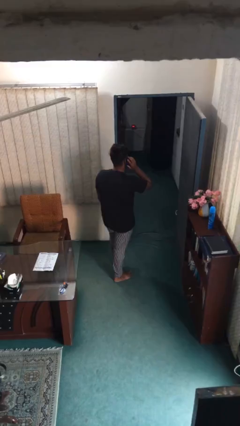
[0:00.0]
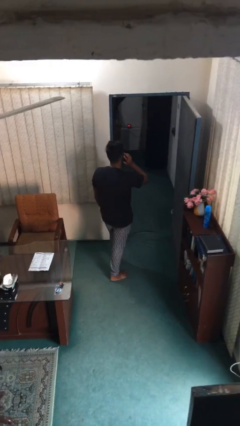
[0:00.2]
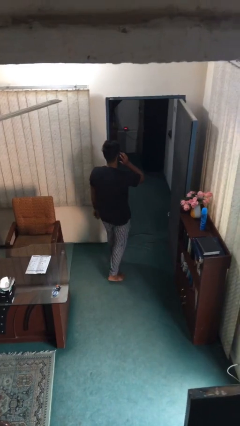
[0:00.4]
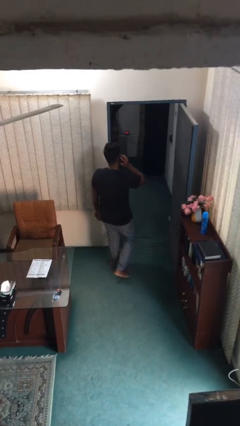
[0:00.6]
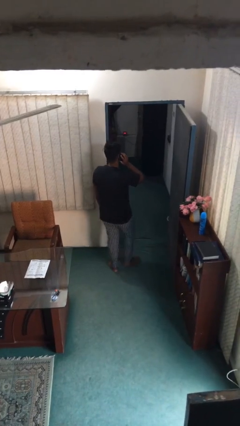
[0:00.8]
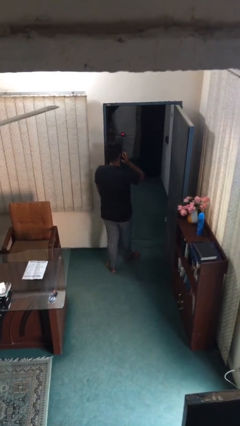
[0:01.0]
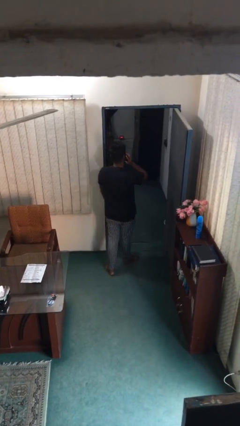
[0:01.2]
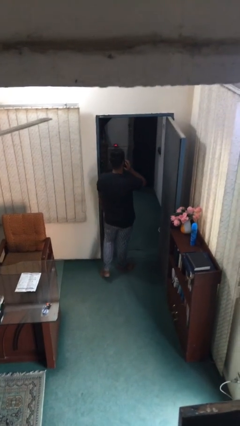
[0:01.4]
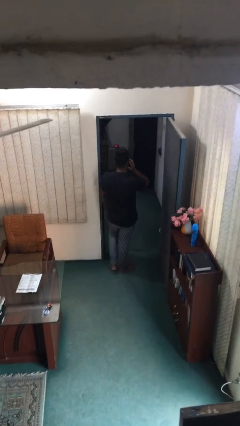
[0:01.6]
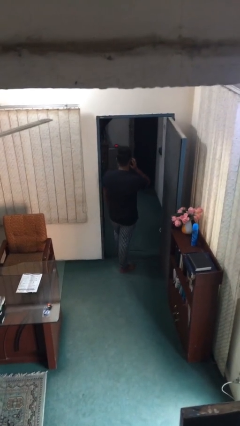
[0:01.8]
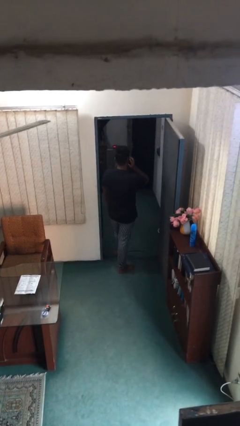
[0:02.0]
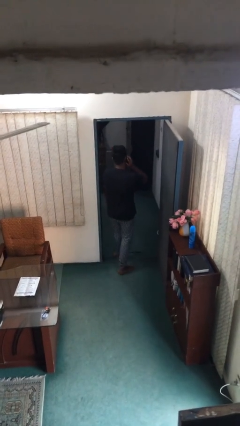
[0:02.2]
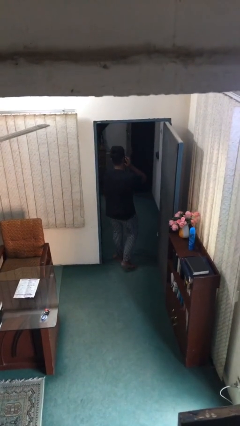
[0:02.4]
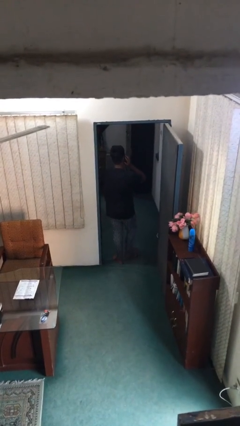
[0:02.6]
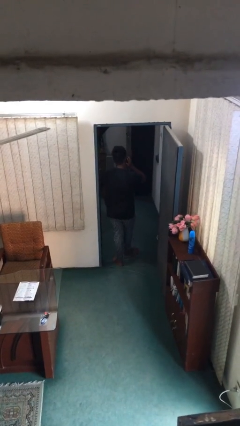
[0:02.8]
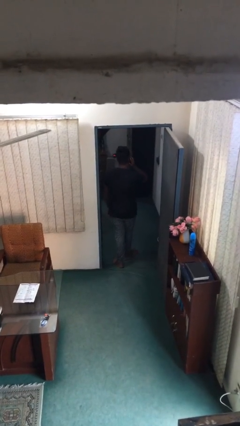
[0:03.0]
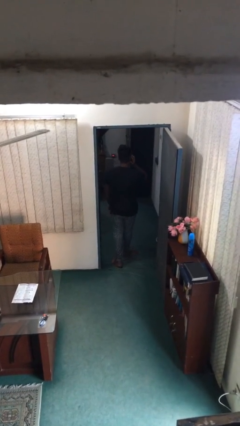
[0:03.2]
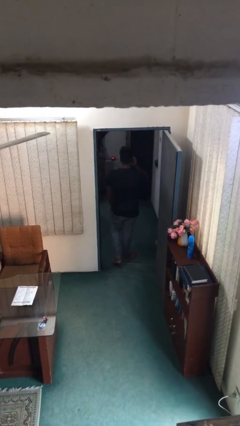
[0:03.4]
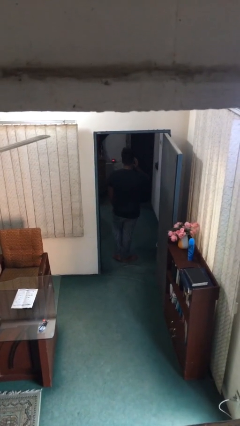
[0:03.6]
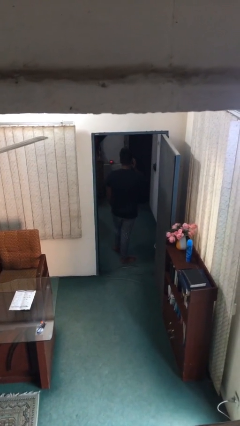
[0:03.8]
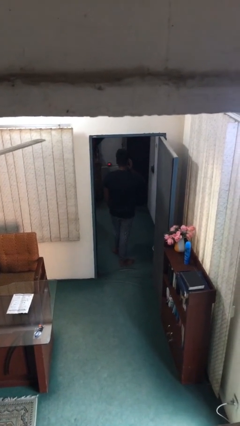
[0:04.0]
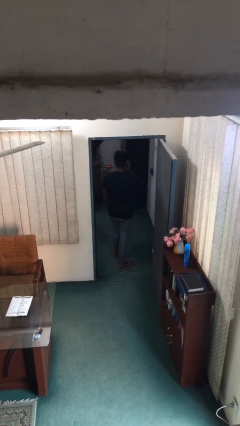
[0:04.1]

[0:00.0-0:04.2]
person exits scene through structure

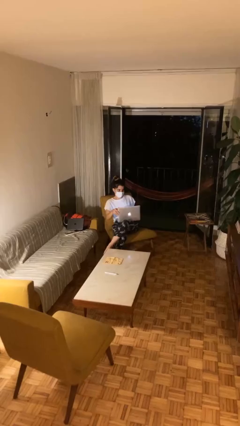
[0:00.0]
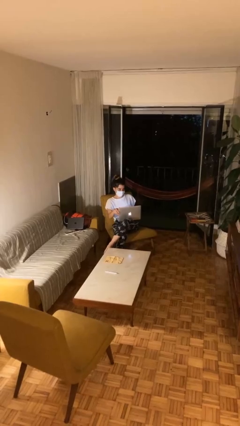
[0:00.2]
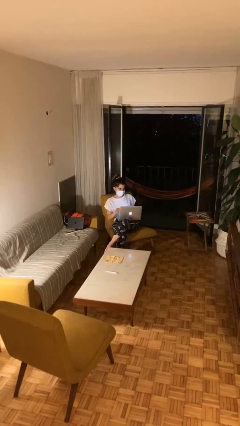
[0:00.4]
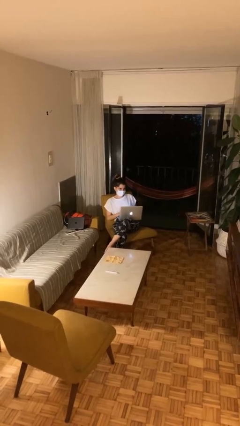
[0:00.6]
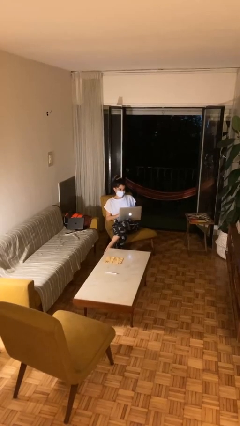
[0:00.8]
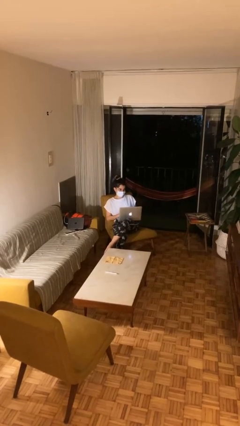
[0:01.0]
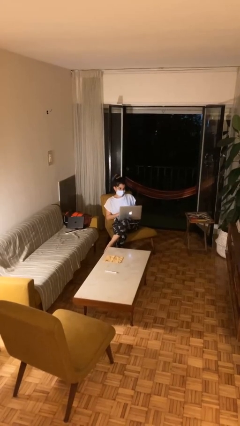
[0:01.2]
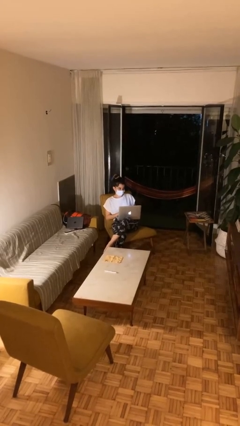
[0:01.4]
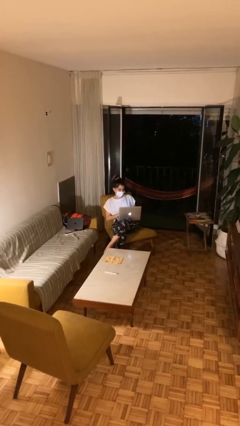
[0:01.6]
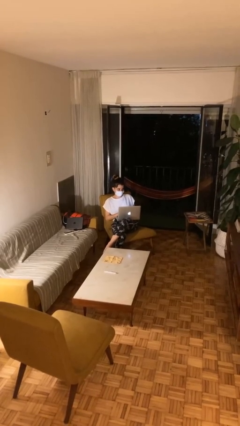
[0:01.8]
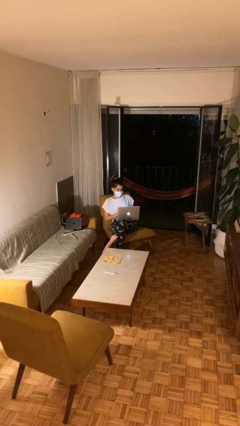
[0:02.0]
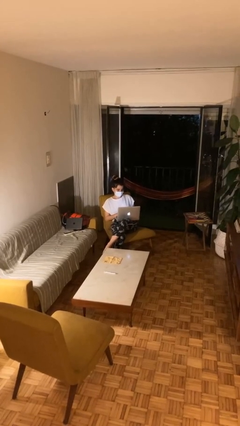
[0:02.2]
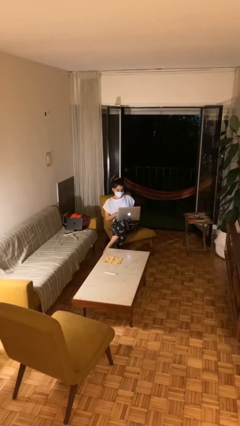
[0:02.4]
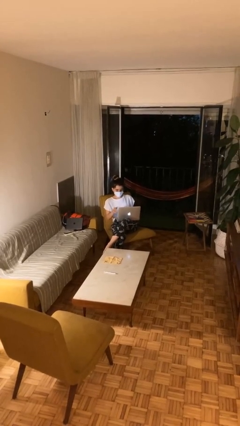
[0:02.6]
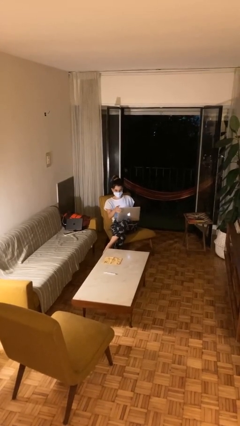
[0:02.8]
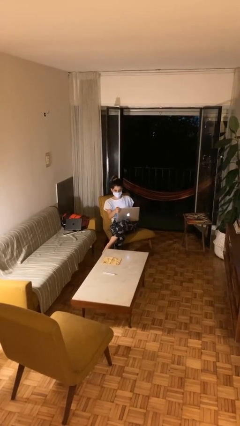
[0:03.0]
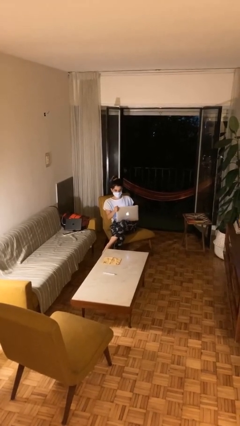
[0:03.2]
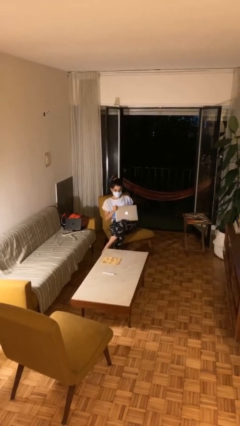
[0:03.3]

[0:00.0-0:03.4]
person interacts with laptop

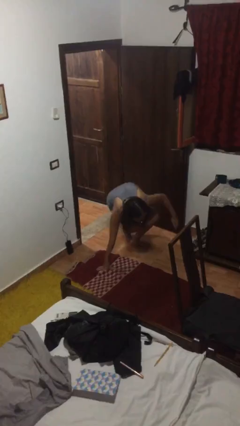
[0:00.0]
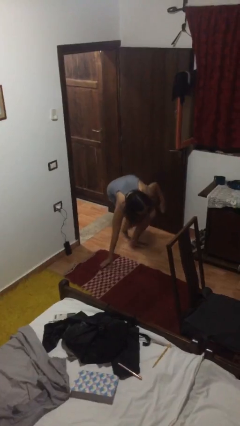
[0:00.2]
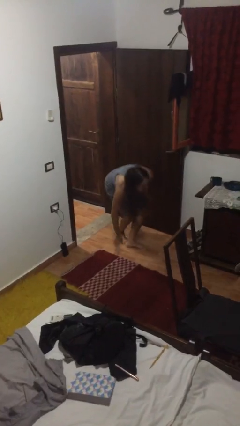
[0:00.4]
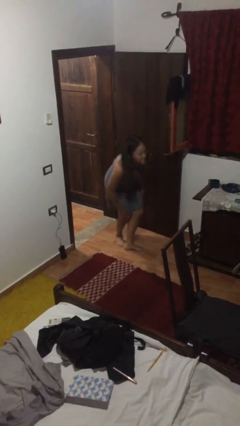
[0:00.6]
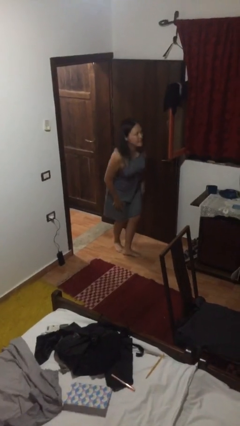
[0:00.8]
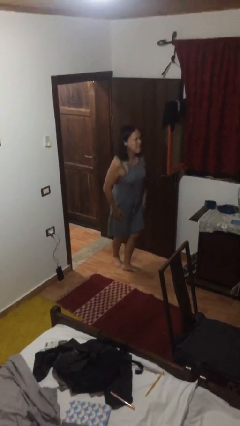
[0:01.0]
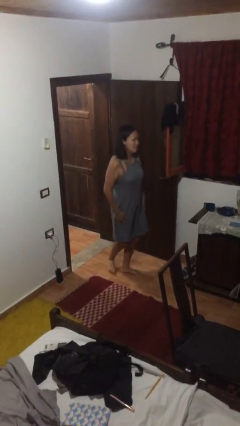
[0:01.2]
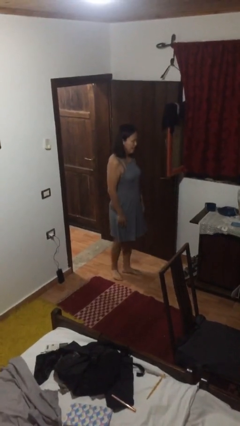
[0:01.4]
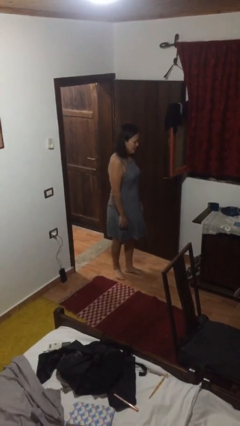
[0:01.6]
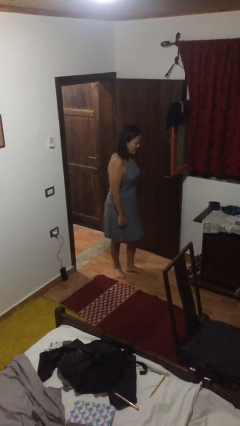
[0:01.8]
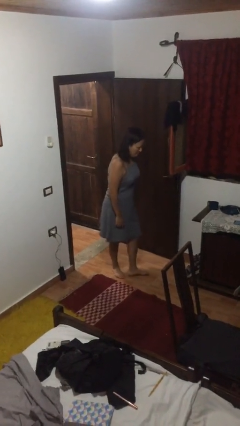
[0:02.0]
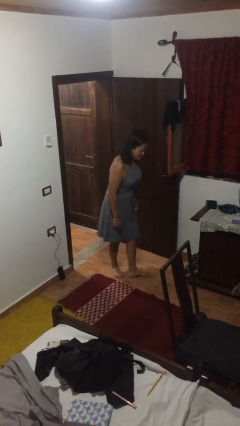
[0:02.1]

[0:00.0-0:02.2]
person stands up from floor

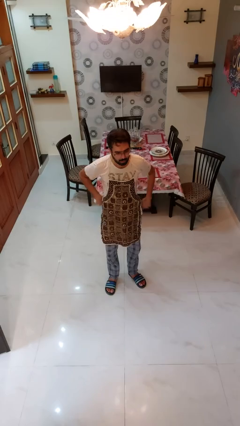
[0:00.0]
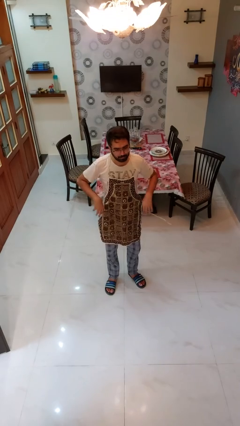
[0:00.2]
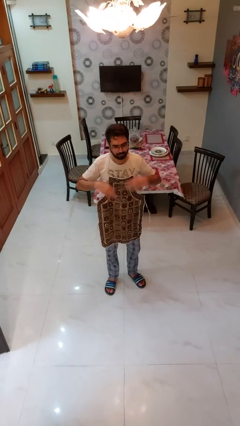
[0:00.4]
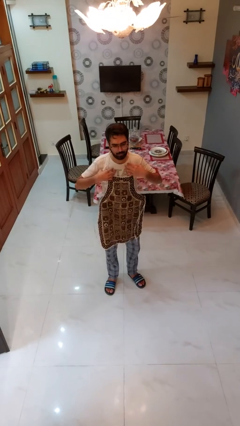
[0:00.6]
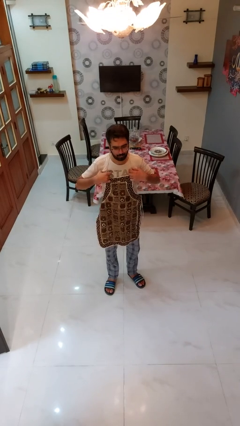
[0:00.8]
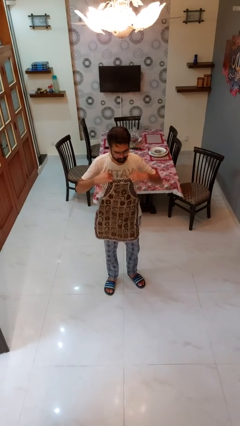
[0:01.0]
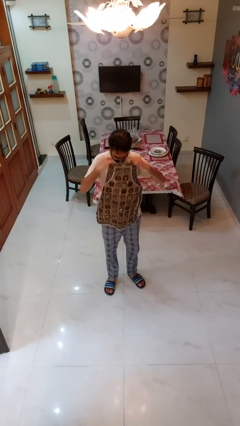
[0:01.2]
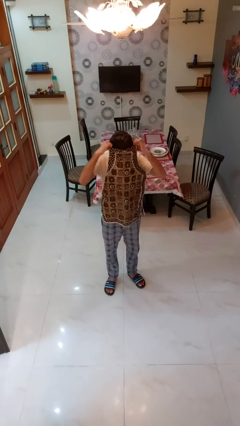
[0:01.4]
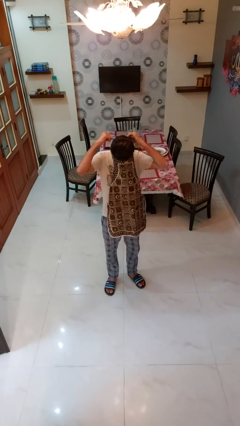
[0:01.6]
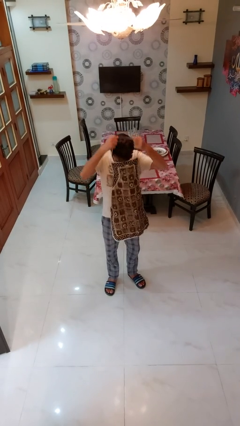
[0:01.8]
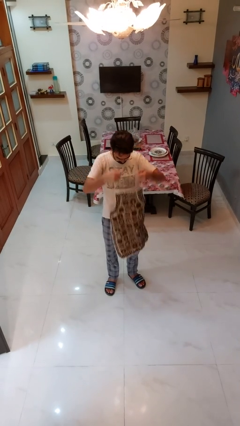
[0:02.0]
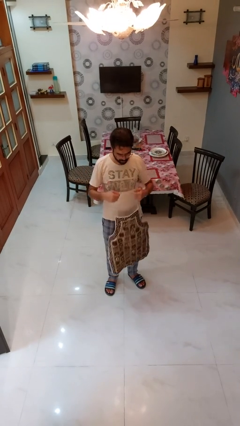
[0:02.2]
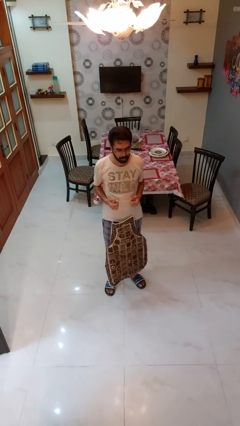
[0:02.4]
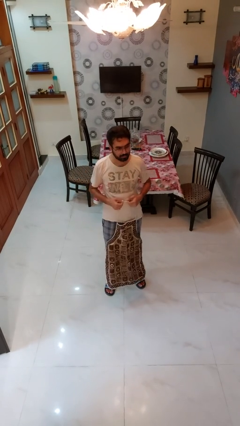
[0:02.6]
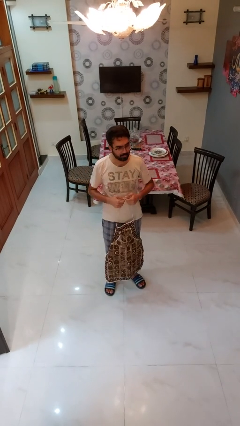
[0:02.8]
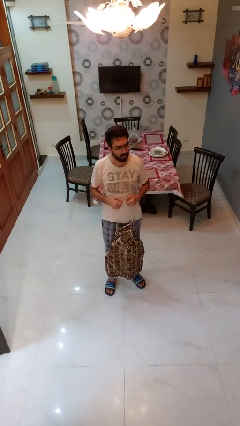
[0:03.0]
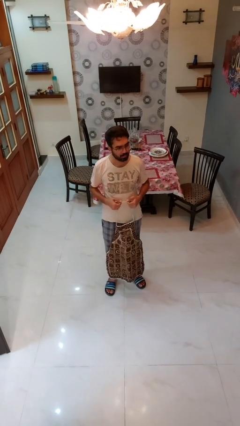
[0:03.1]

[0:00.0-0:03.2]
person takes off apron

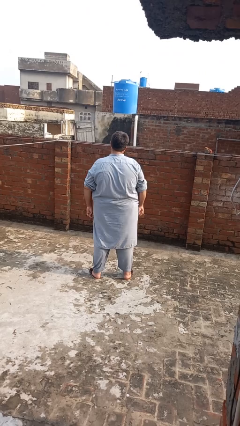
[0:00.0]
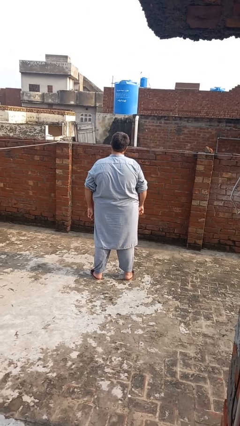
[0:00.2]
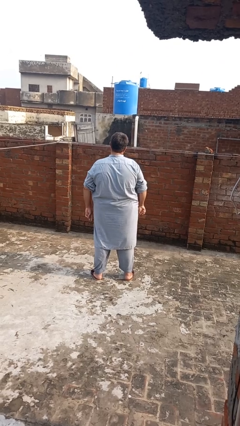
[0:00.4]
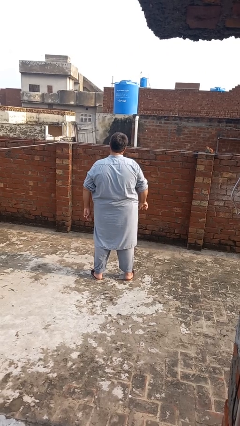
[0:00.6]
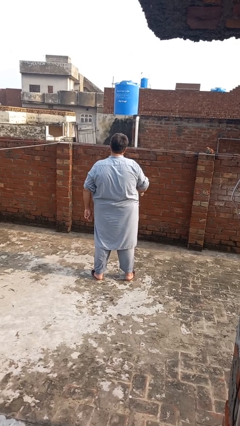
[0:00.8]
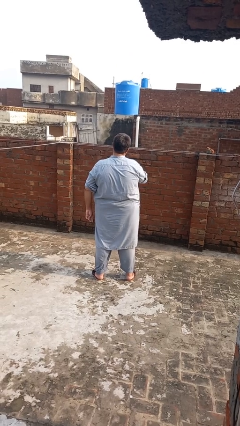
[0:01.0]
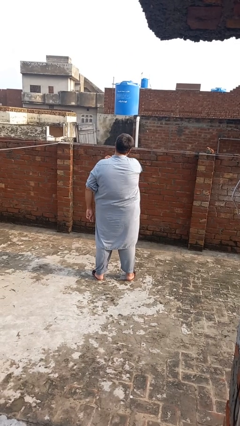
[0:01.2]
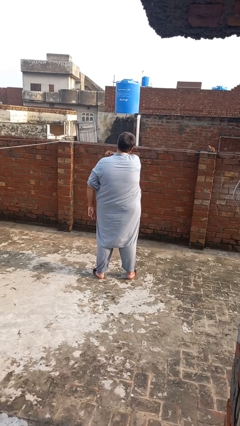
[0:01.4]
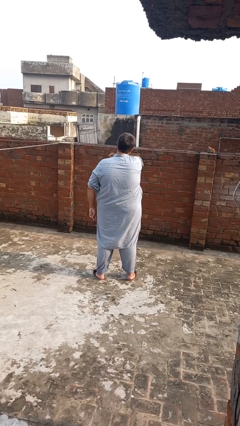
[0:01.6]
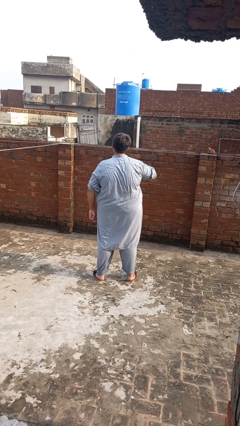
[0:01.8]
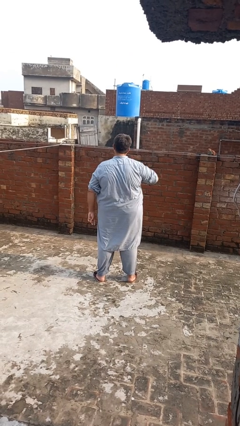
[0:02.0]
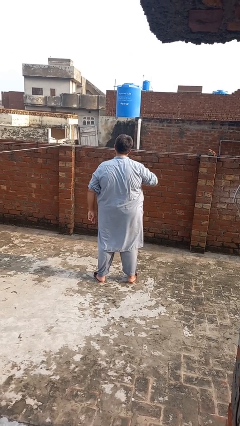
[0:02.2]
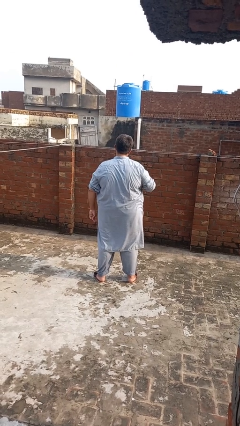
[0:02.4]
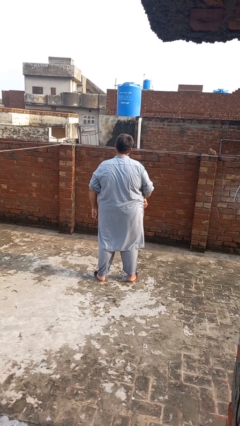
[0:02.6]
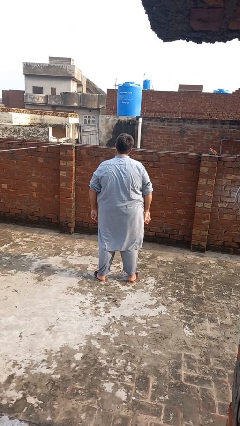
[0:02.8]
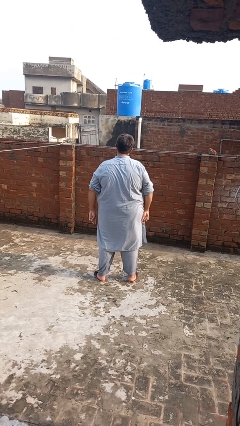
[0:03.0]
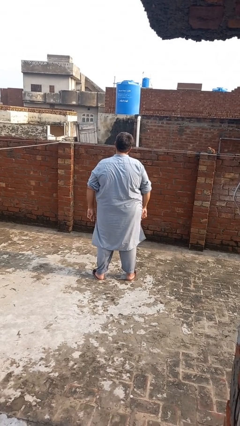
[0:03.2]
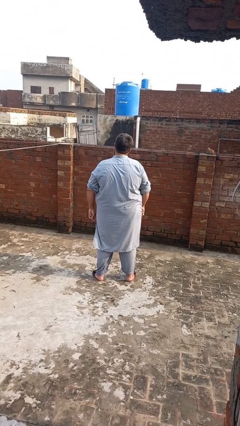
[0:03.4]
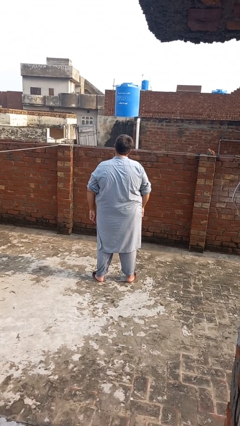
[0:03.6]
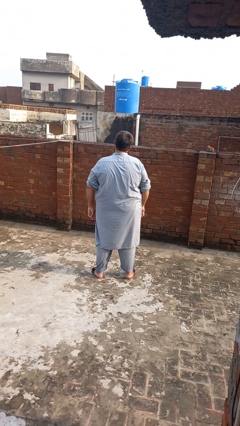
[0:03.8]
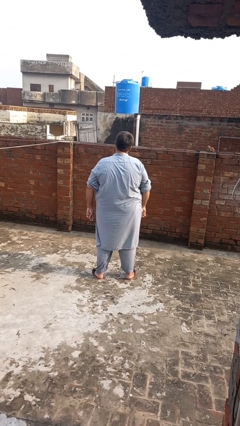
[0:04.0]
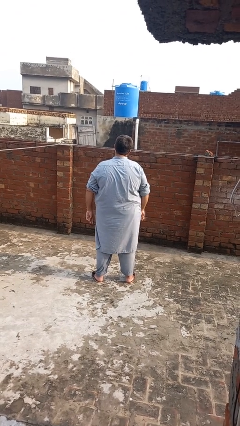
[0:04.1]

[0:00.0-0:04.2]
person gestures cut

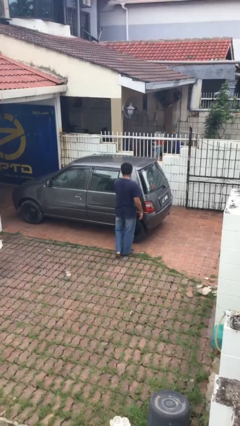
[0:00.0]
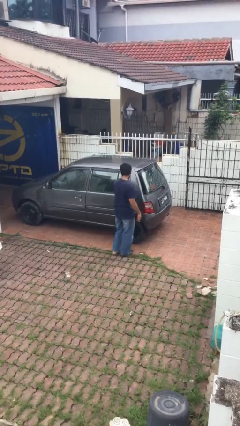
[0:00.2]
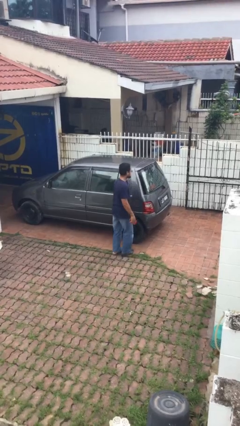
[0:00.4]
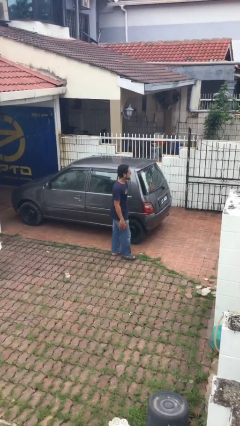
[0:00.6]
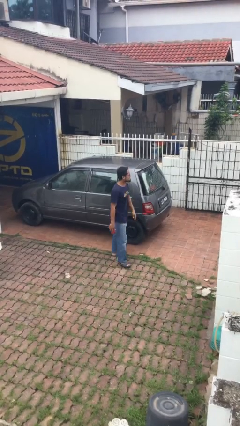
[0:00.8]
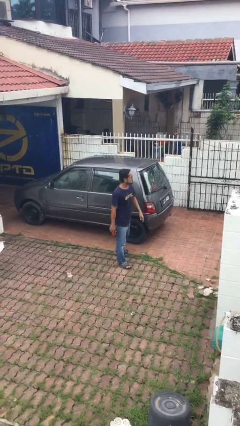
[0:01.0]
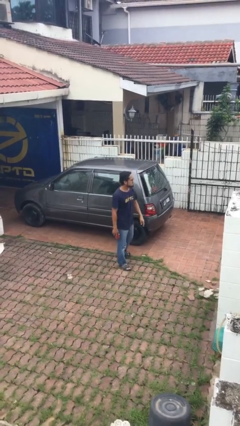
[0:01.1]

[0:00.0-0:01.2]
person closes car door
